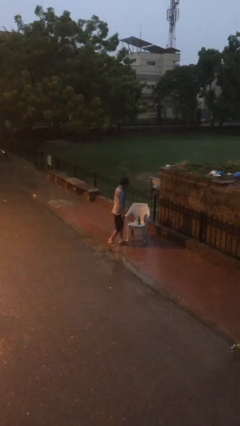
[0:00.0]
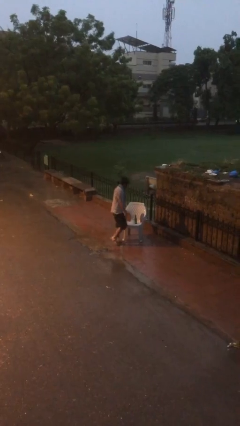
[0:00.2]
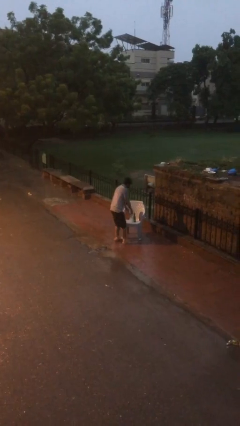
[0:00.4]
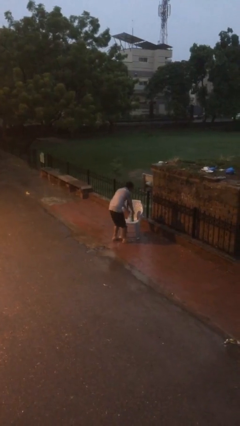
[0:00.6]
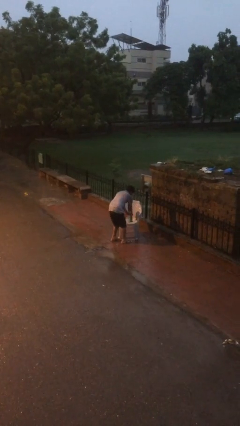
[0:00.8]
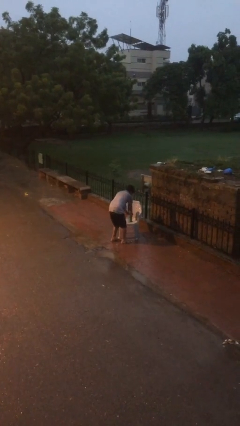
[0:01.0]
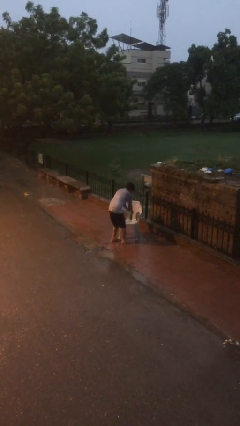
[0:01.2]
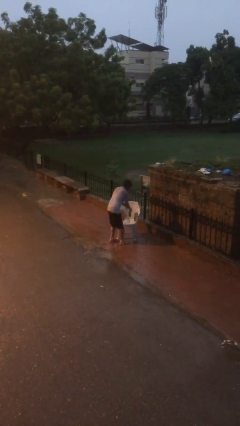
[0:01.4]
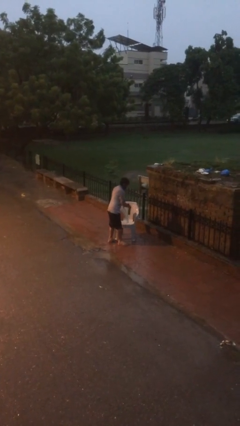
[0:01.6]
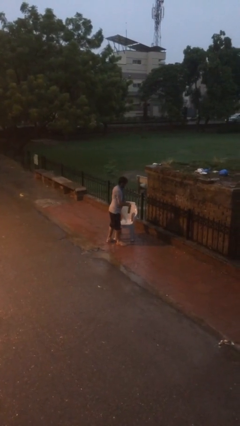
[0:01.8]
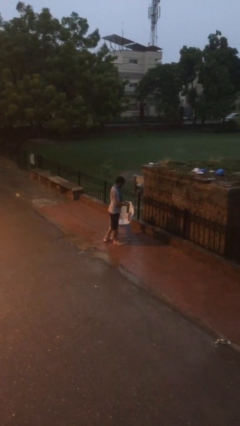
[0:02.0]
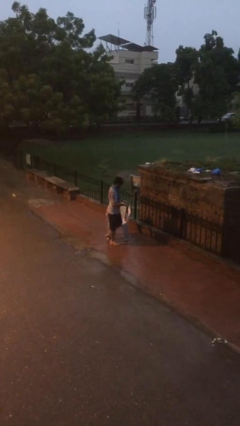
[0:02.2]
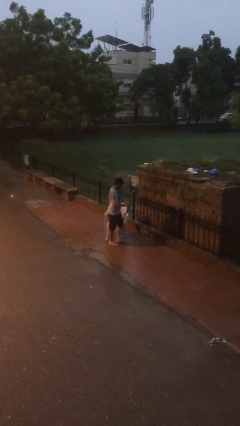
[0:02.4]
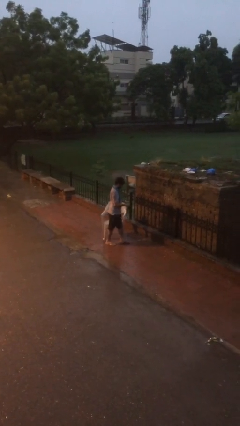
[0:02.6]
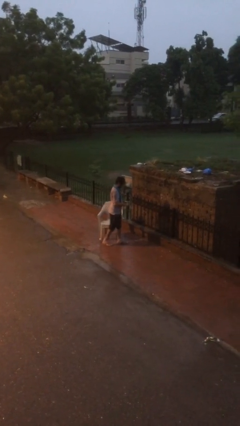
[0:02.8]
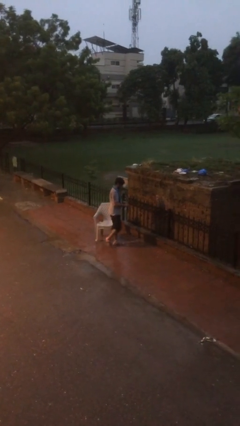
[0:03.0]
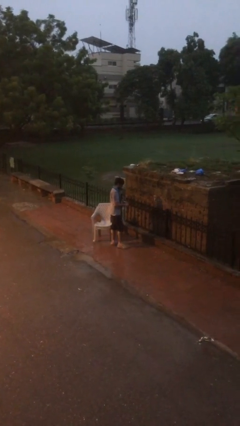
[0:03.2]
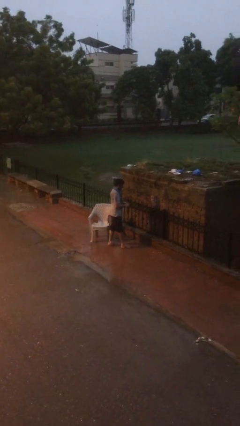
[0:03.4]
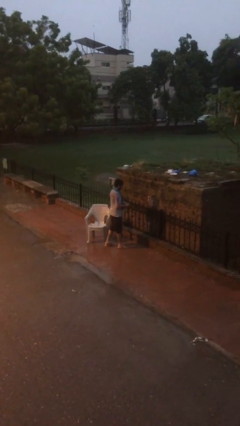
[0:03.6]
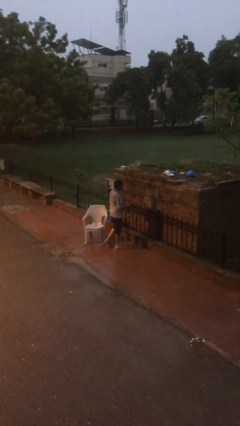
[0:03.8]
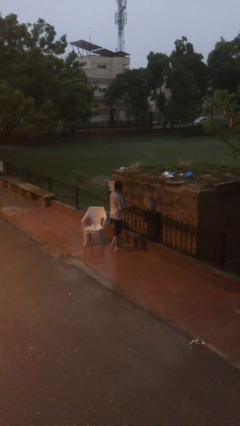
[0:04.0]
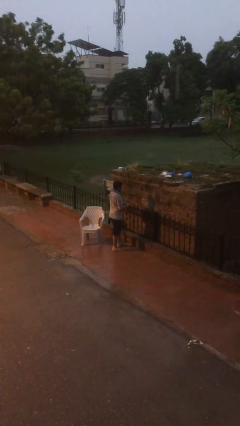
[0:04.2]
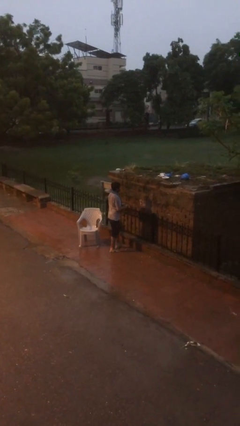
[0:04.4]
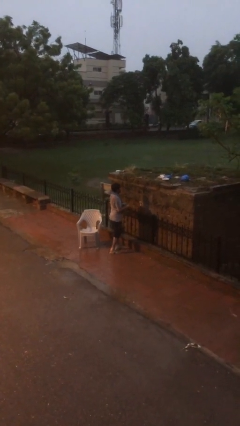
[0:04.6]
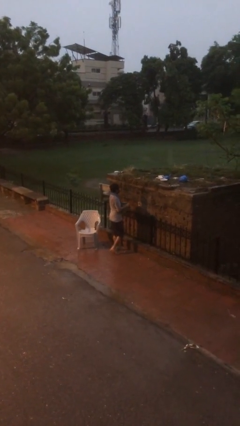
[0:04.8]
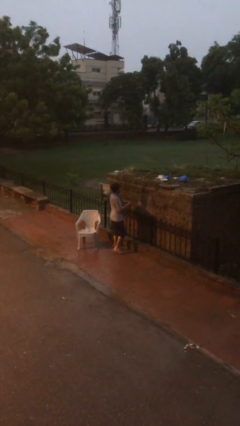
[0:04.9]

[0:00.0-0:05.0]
person picks up object from table

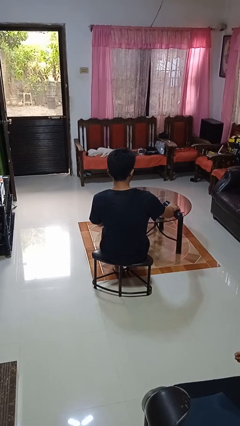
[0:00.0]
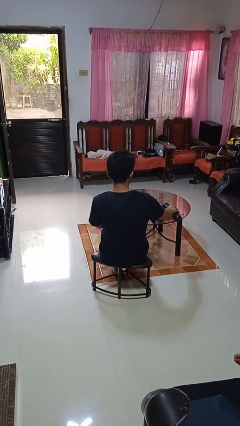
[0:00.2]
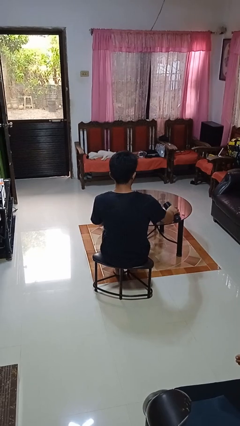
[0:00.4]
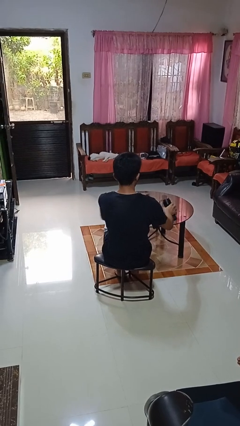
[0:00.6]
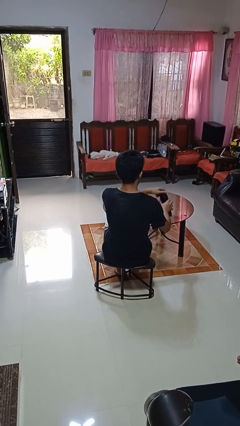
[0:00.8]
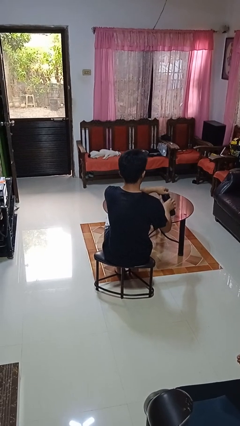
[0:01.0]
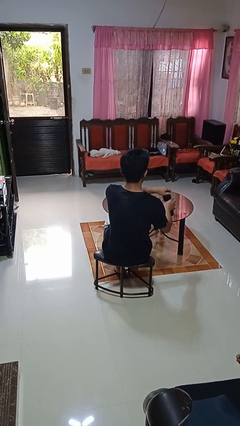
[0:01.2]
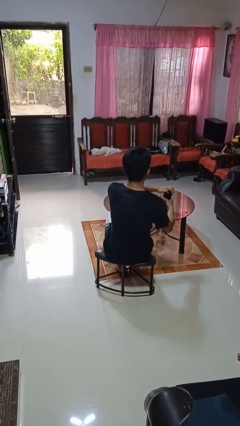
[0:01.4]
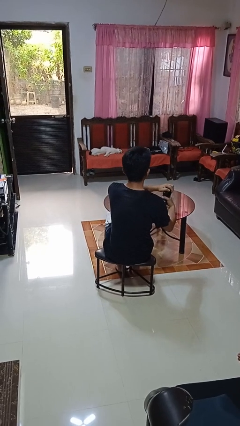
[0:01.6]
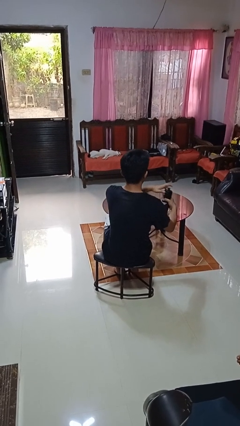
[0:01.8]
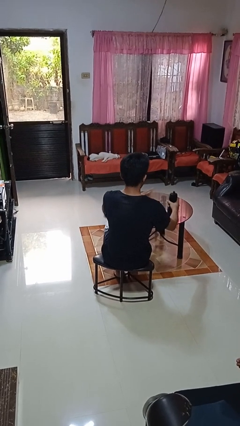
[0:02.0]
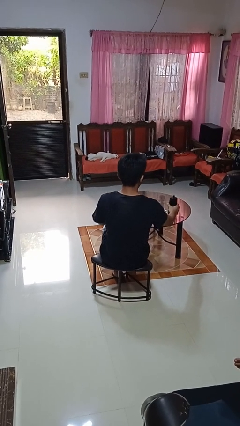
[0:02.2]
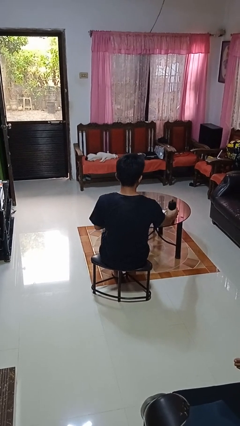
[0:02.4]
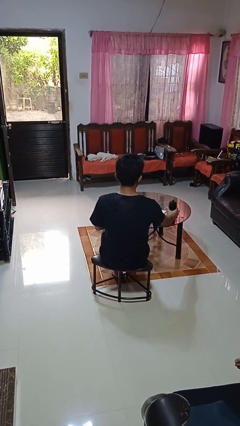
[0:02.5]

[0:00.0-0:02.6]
person screws lid to bottle

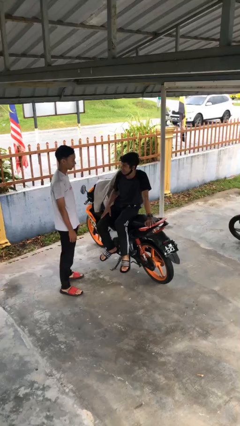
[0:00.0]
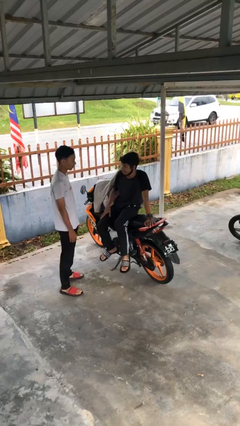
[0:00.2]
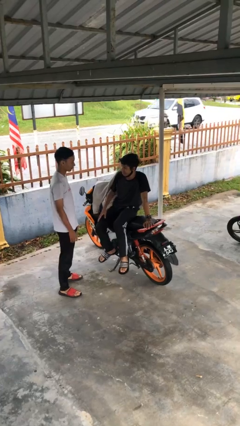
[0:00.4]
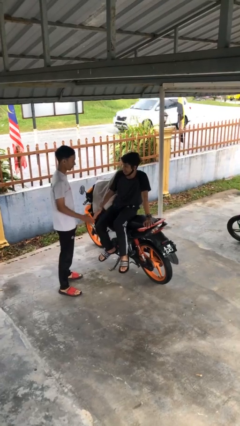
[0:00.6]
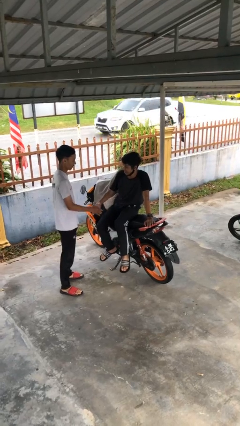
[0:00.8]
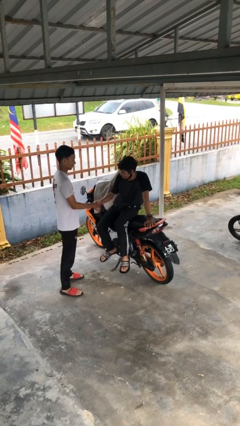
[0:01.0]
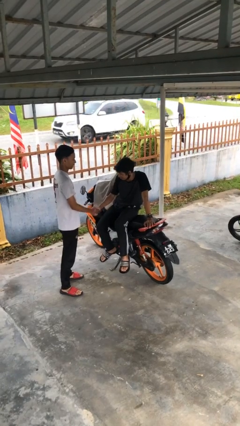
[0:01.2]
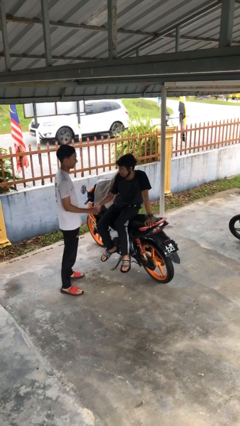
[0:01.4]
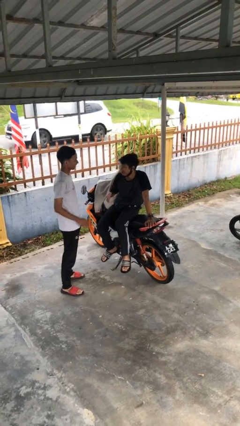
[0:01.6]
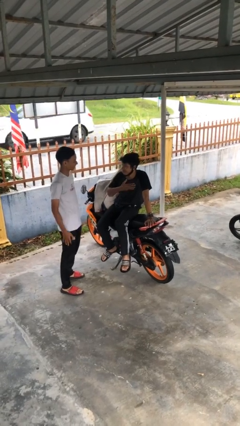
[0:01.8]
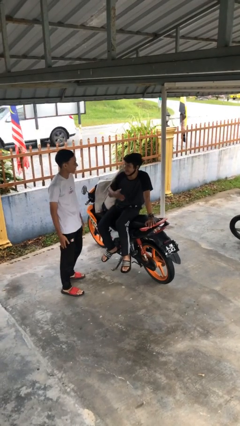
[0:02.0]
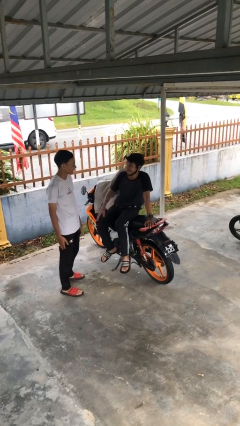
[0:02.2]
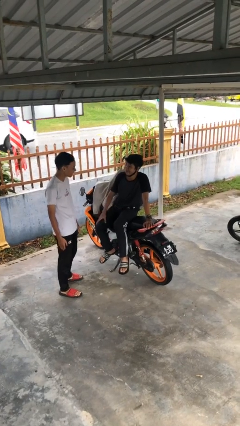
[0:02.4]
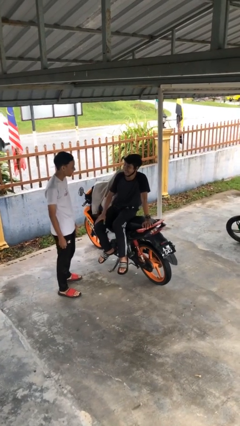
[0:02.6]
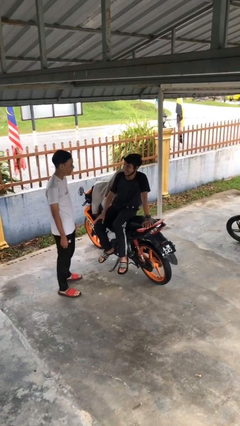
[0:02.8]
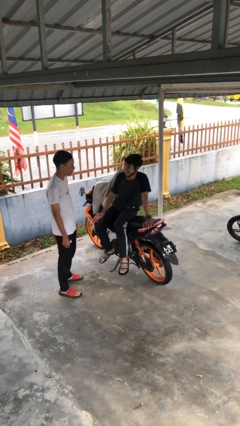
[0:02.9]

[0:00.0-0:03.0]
person shakes hand

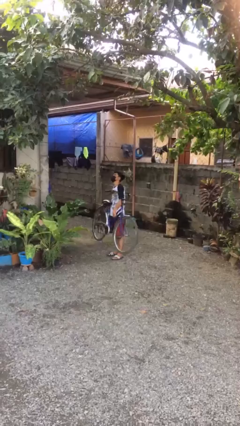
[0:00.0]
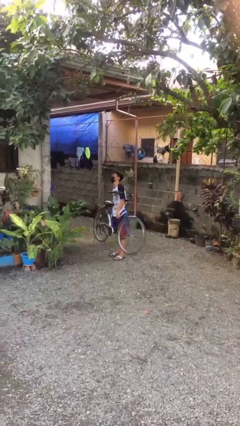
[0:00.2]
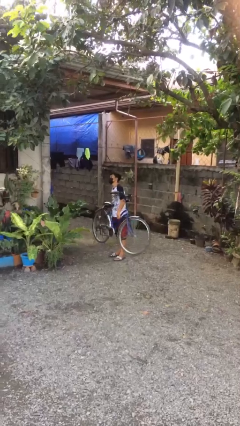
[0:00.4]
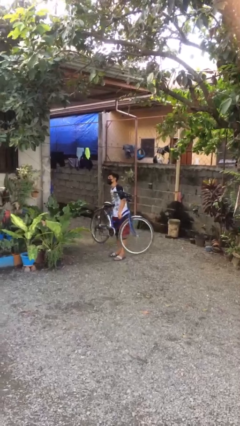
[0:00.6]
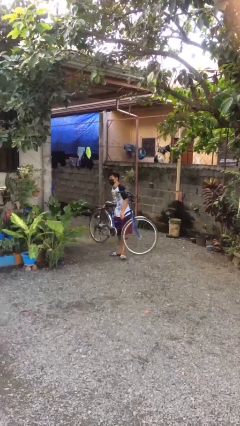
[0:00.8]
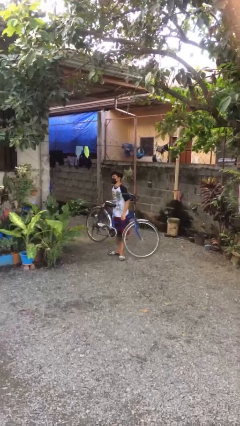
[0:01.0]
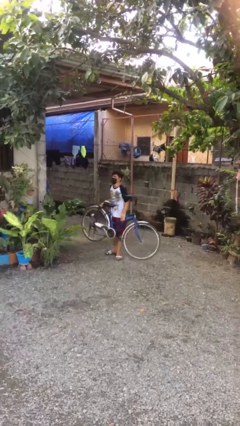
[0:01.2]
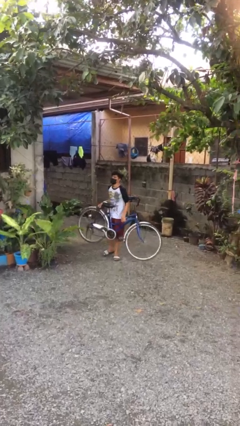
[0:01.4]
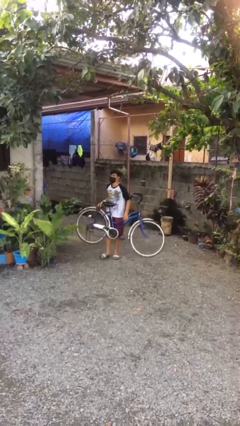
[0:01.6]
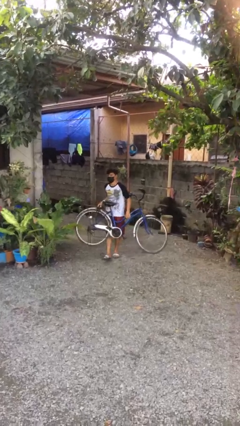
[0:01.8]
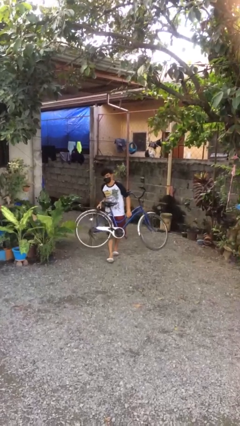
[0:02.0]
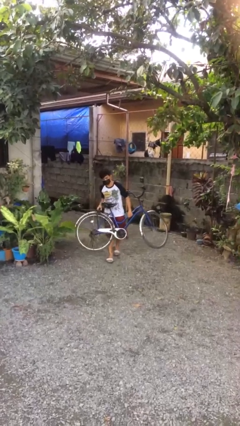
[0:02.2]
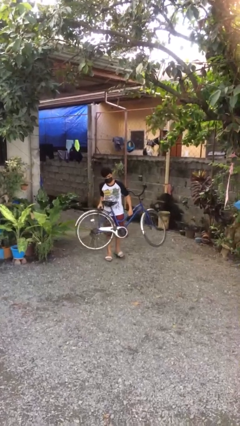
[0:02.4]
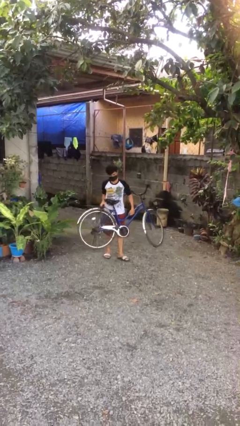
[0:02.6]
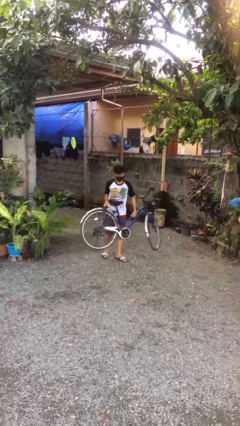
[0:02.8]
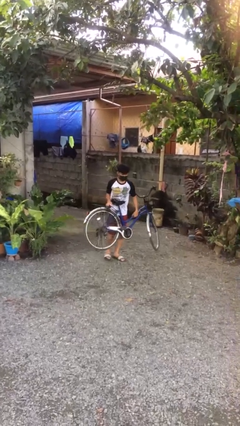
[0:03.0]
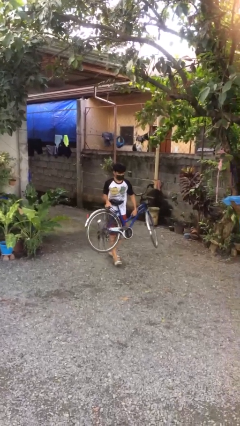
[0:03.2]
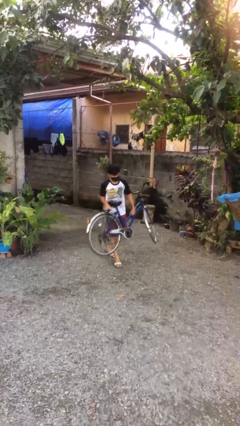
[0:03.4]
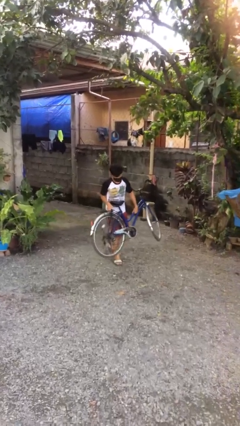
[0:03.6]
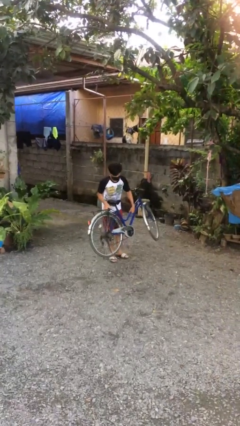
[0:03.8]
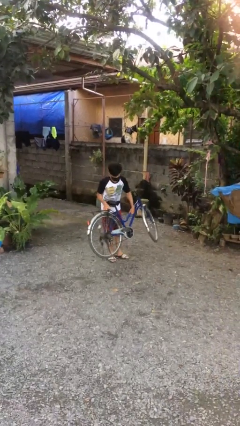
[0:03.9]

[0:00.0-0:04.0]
person carries heavy object

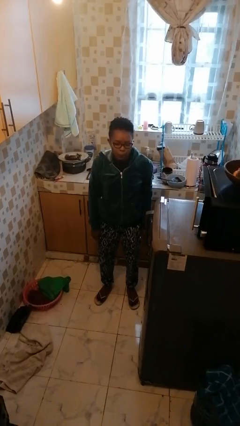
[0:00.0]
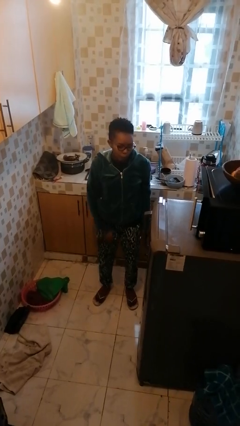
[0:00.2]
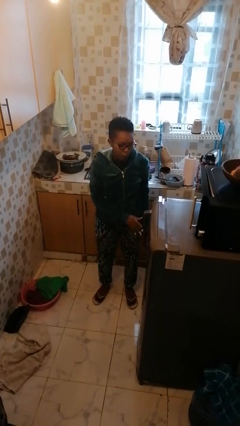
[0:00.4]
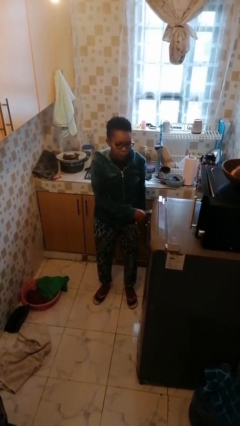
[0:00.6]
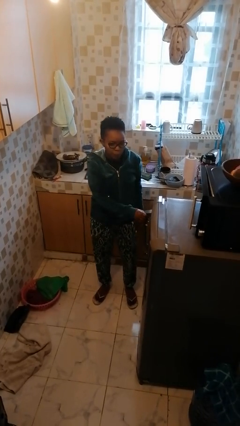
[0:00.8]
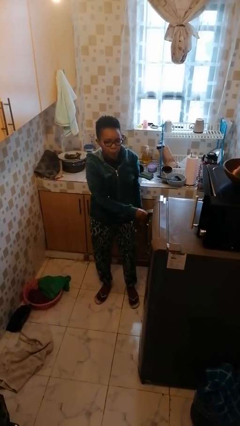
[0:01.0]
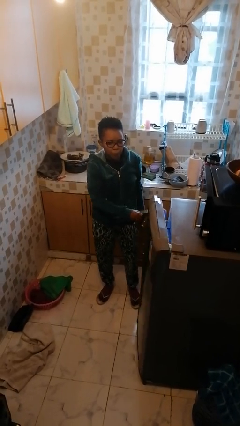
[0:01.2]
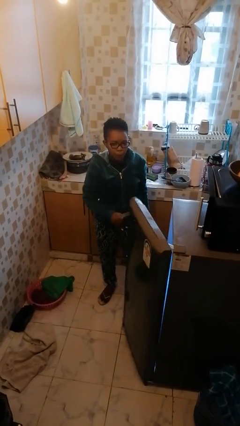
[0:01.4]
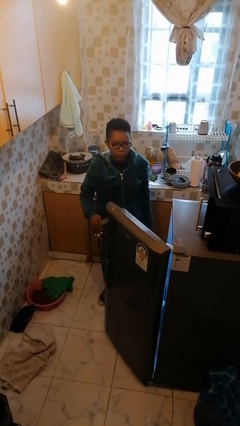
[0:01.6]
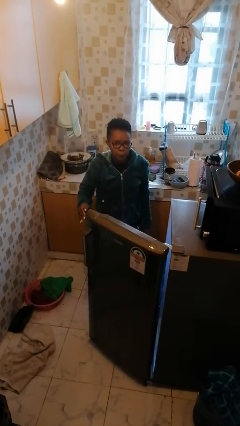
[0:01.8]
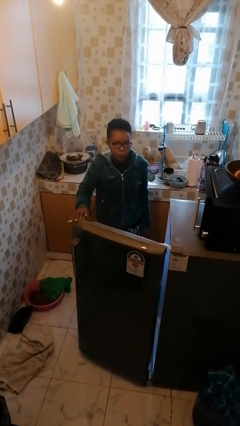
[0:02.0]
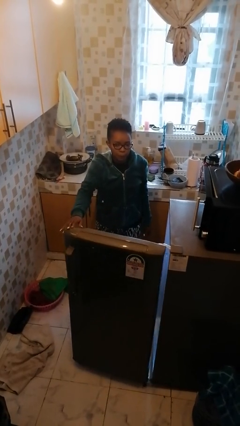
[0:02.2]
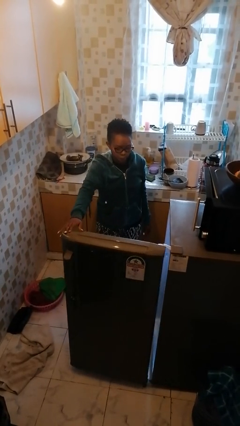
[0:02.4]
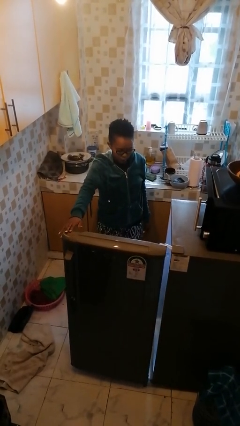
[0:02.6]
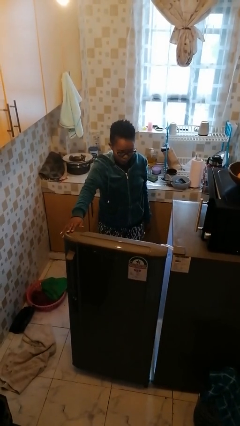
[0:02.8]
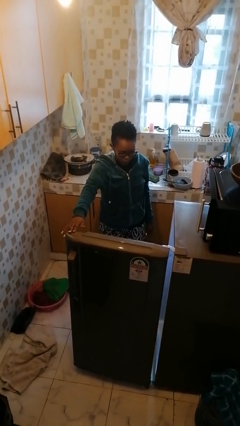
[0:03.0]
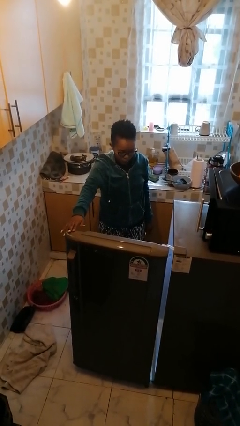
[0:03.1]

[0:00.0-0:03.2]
person opens refrigerator
